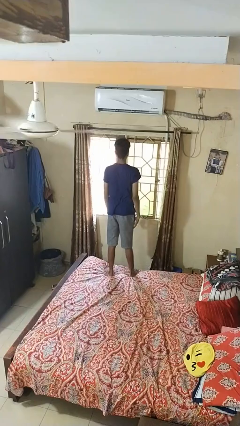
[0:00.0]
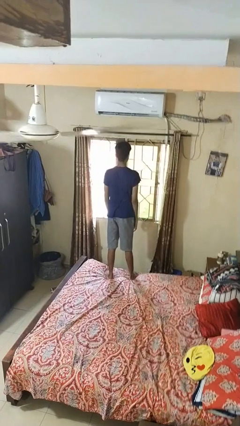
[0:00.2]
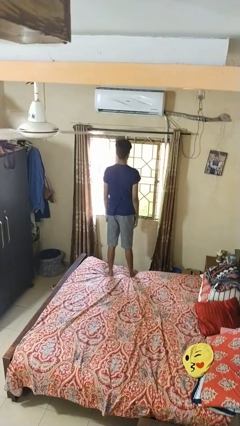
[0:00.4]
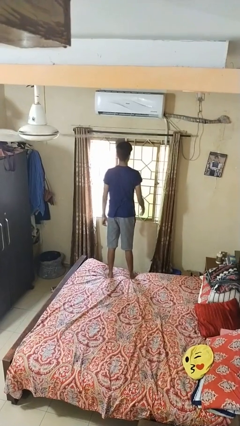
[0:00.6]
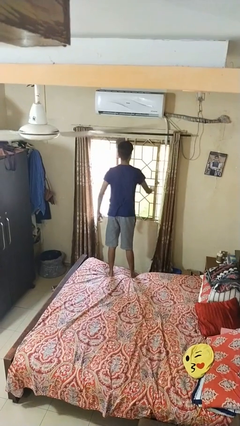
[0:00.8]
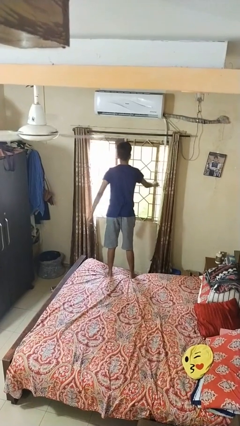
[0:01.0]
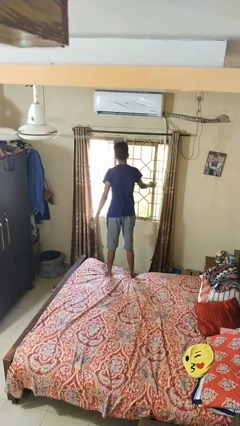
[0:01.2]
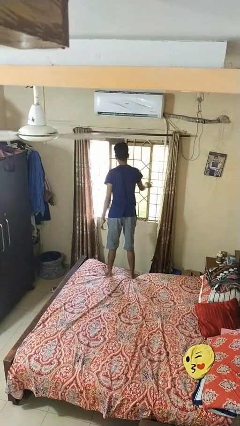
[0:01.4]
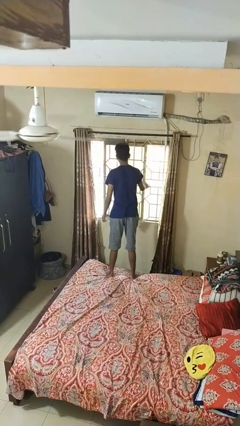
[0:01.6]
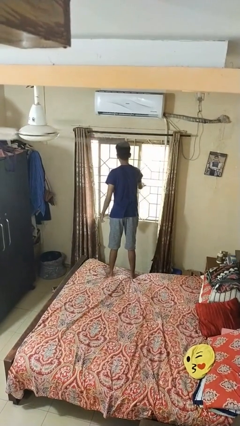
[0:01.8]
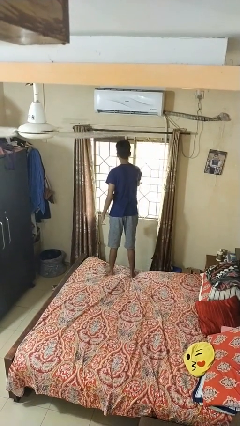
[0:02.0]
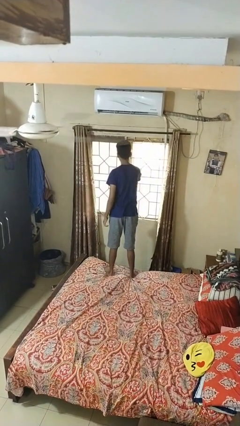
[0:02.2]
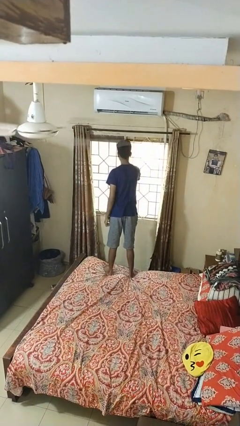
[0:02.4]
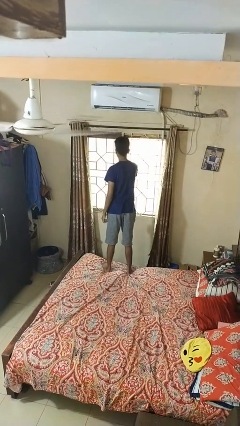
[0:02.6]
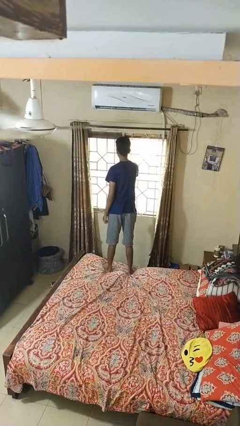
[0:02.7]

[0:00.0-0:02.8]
person closes home window

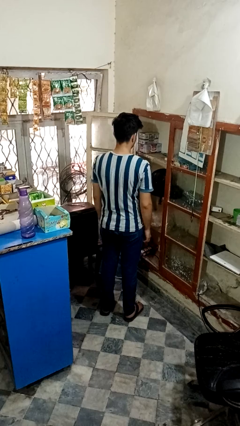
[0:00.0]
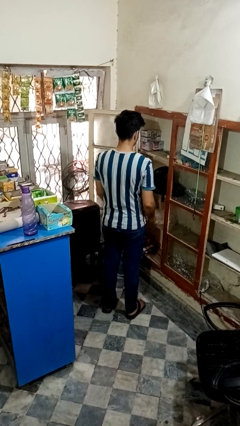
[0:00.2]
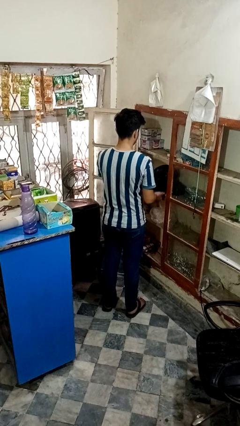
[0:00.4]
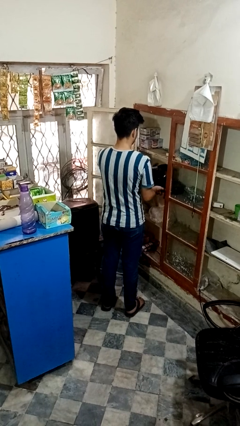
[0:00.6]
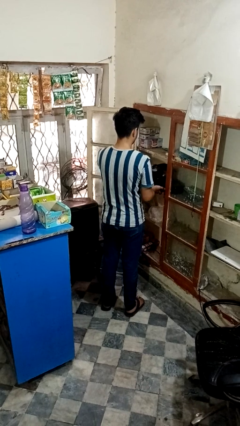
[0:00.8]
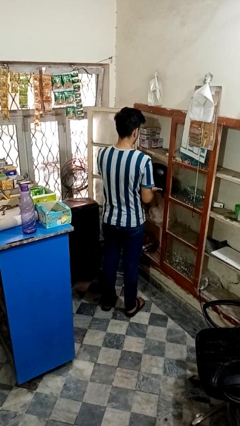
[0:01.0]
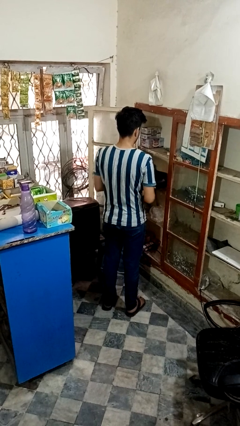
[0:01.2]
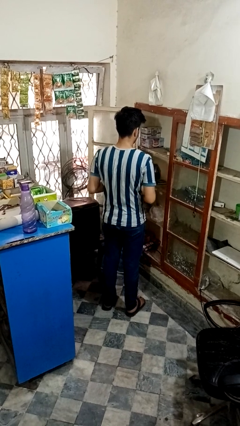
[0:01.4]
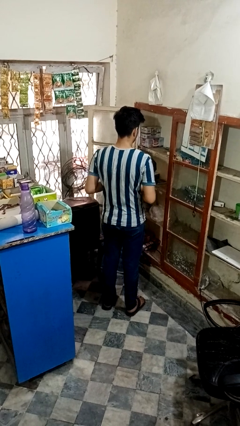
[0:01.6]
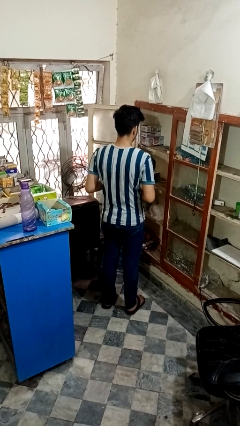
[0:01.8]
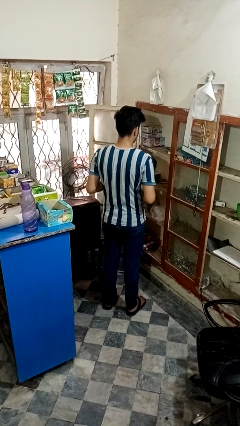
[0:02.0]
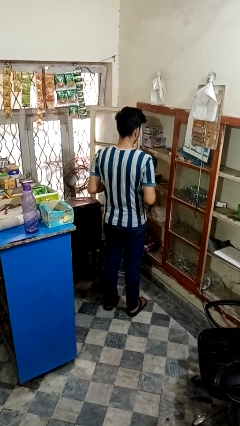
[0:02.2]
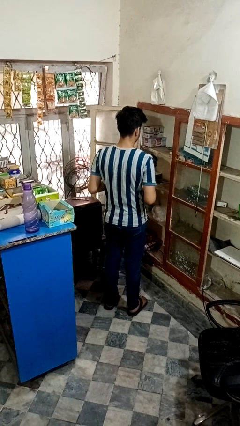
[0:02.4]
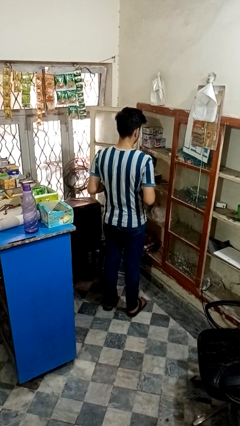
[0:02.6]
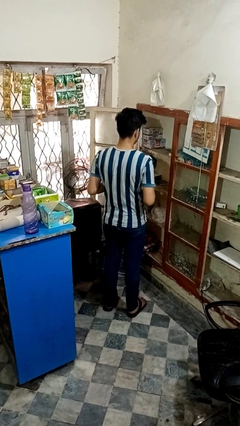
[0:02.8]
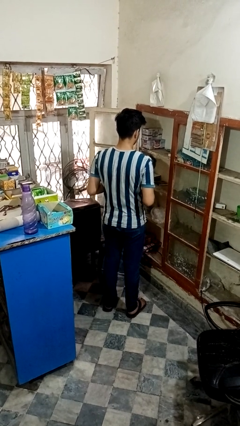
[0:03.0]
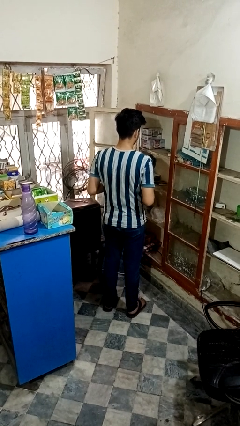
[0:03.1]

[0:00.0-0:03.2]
person picks up object from shelf

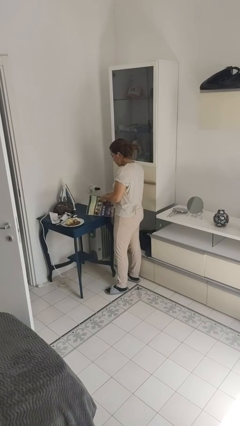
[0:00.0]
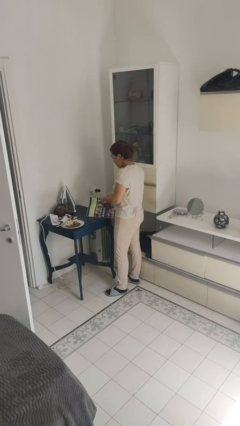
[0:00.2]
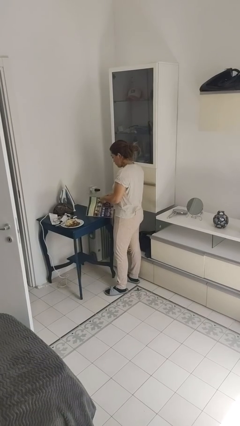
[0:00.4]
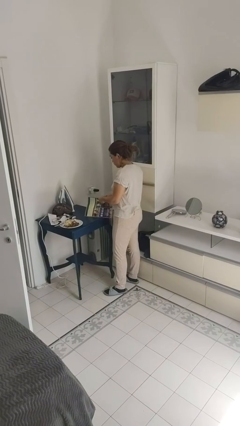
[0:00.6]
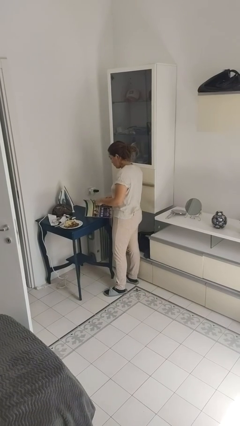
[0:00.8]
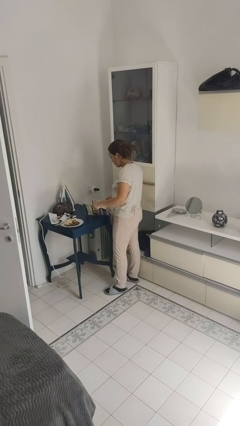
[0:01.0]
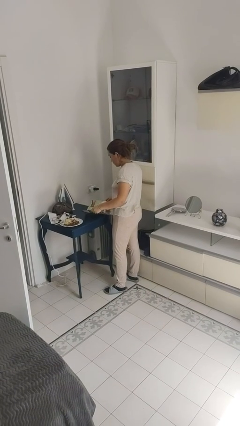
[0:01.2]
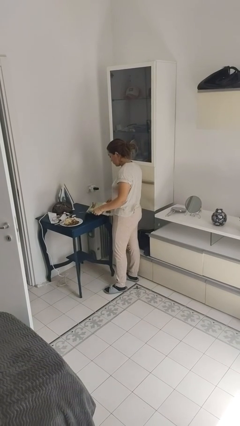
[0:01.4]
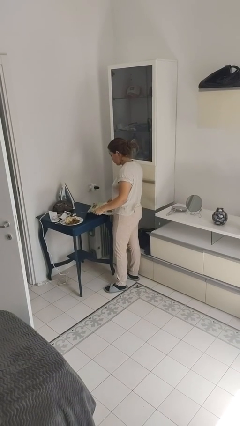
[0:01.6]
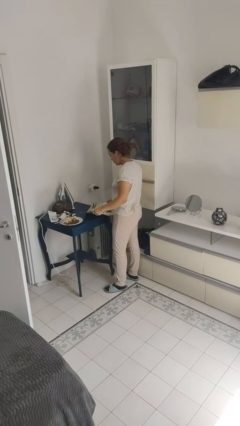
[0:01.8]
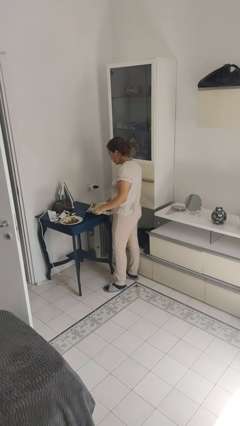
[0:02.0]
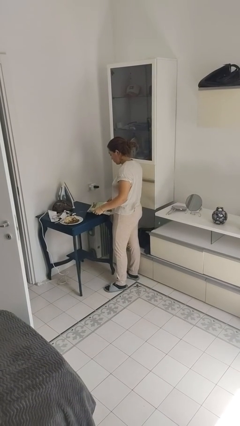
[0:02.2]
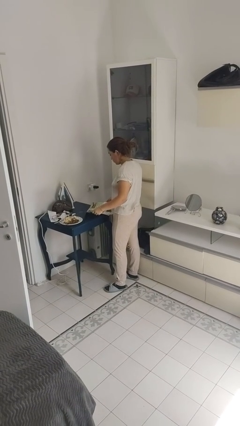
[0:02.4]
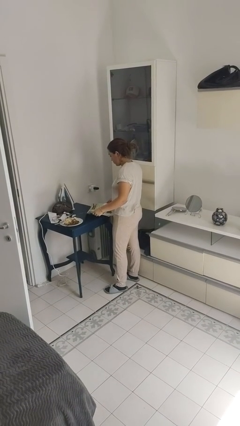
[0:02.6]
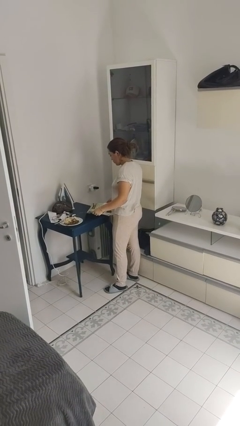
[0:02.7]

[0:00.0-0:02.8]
person reads magazine

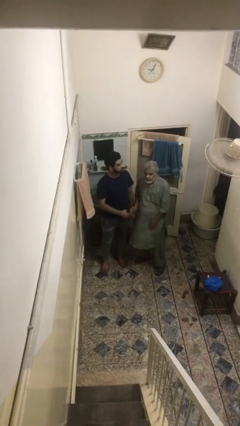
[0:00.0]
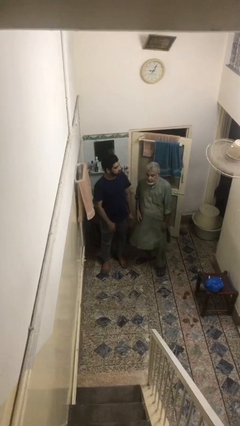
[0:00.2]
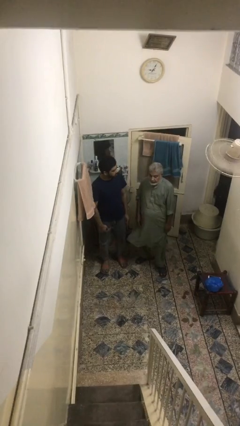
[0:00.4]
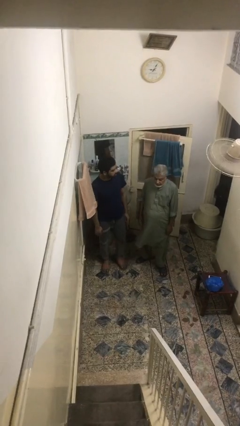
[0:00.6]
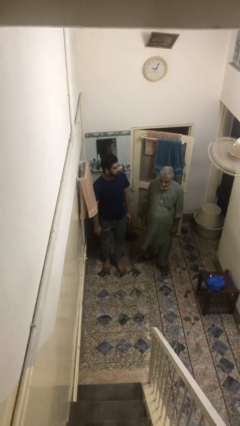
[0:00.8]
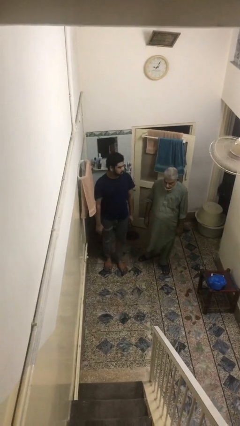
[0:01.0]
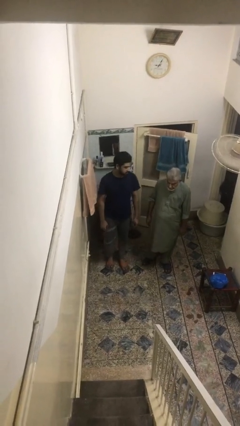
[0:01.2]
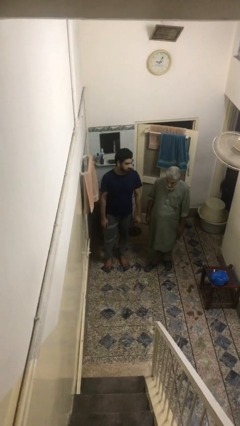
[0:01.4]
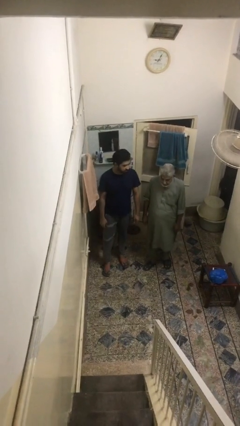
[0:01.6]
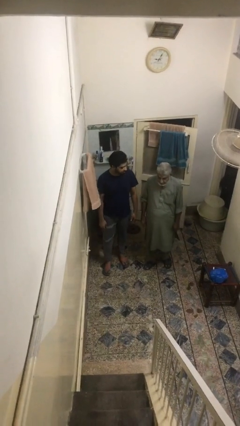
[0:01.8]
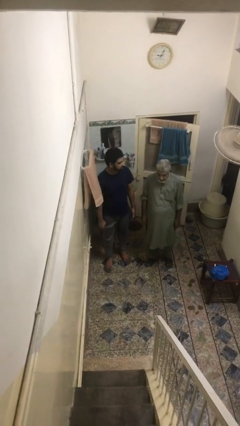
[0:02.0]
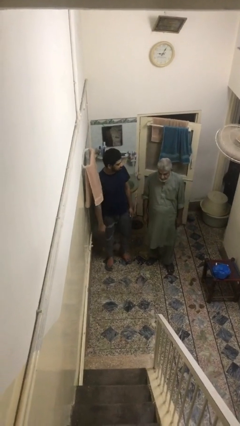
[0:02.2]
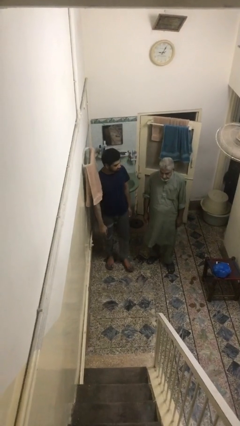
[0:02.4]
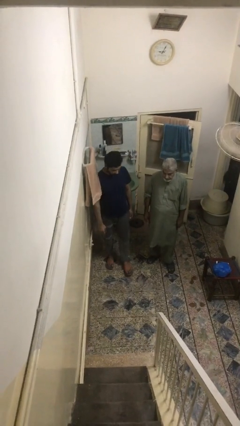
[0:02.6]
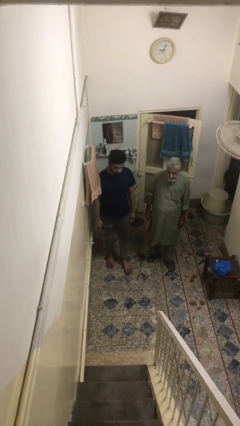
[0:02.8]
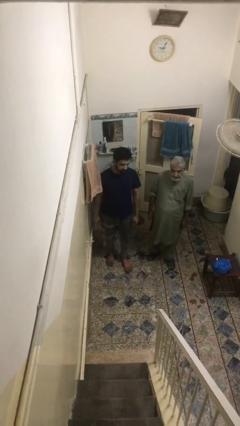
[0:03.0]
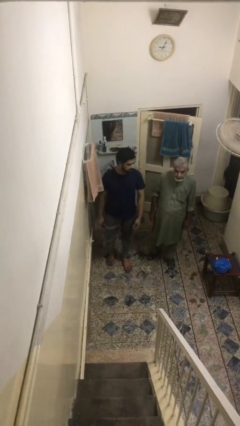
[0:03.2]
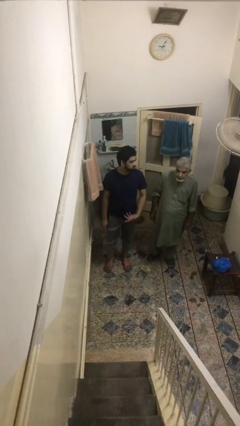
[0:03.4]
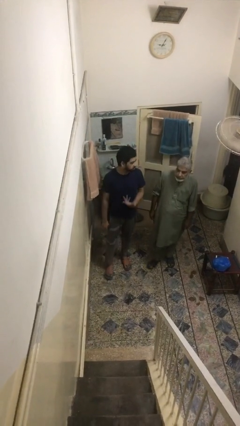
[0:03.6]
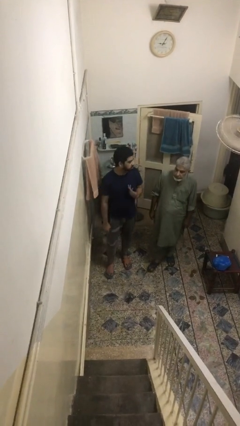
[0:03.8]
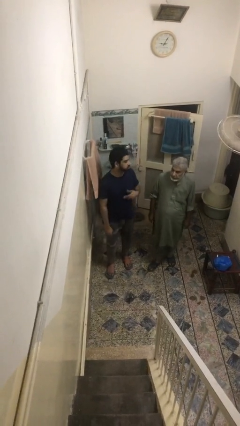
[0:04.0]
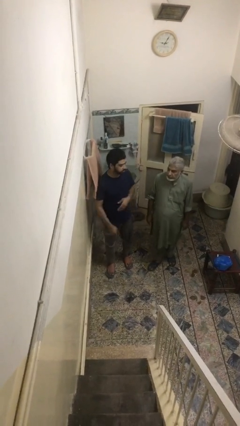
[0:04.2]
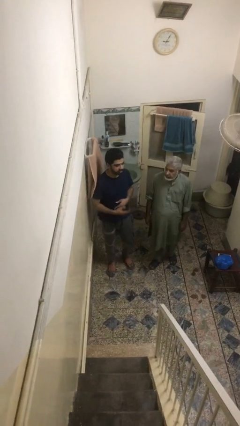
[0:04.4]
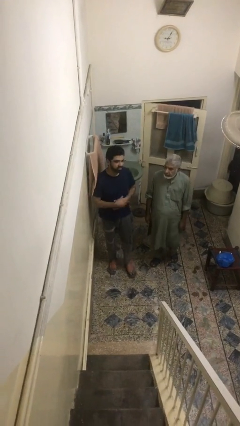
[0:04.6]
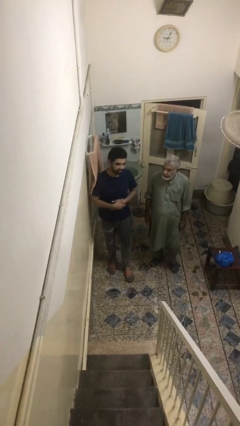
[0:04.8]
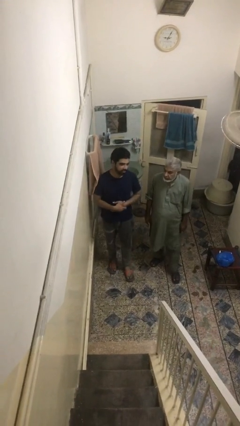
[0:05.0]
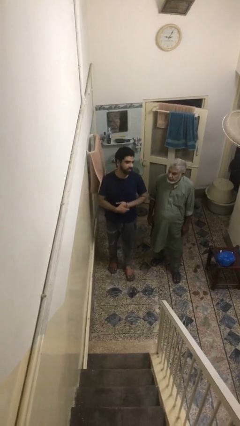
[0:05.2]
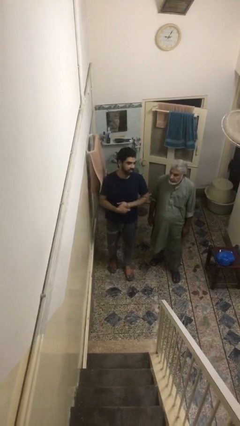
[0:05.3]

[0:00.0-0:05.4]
person talks to person

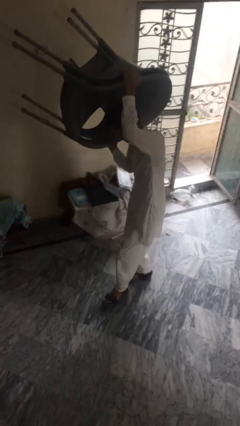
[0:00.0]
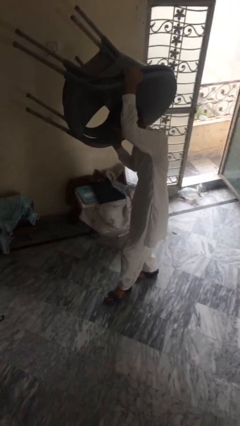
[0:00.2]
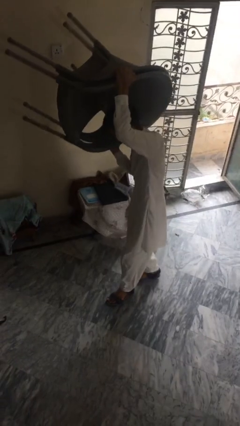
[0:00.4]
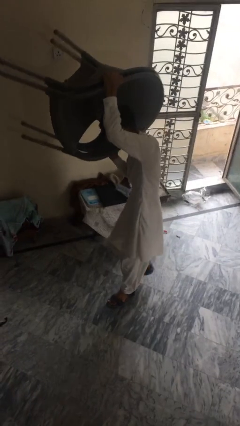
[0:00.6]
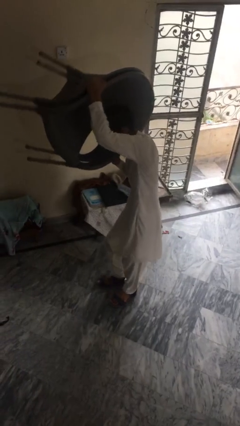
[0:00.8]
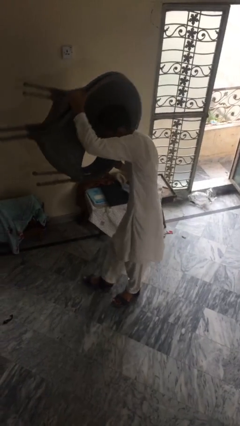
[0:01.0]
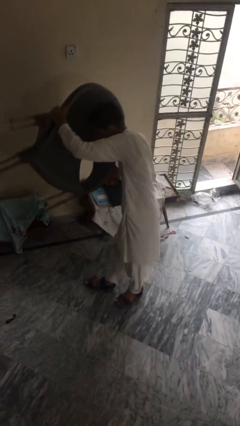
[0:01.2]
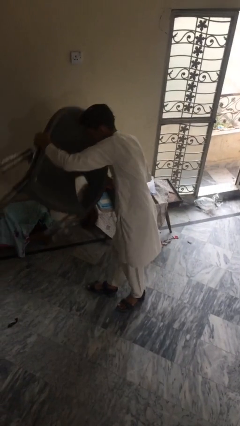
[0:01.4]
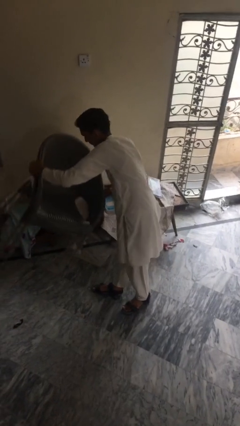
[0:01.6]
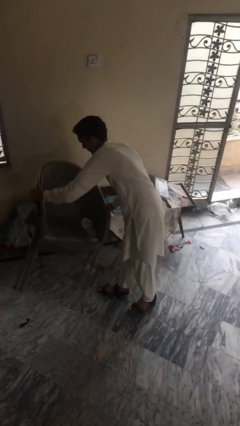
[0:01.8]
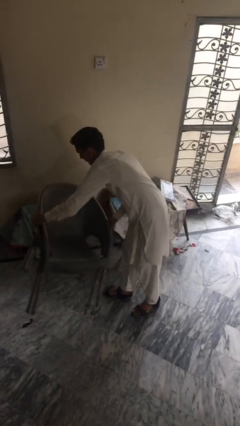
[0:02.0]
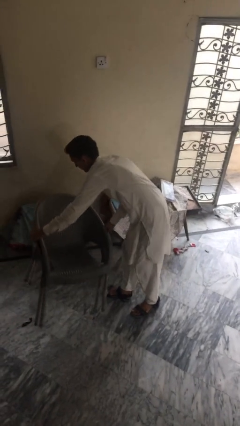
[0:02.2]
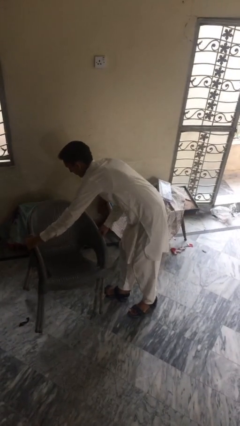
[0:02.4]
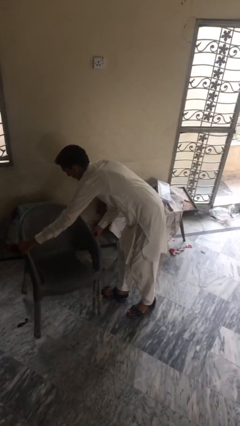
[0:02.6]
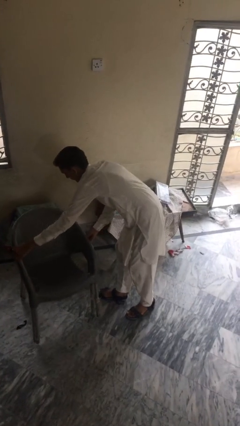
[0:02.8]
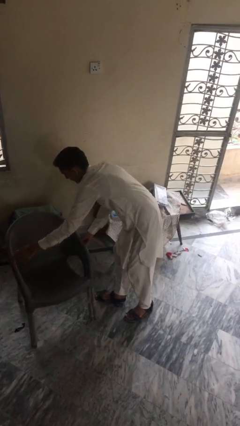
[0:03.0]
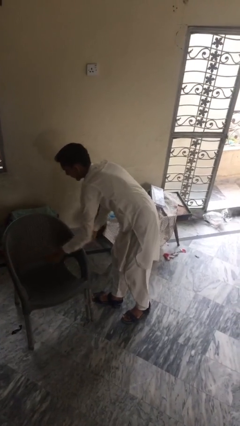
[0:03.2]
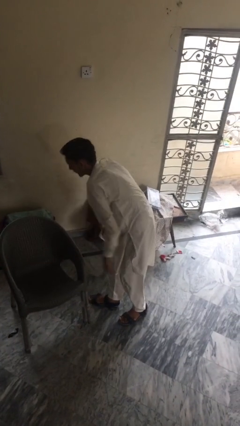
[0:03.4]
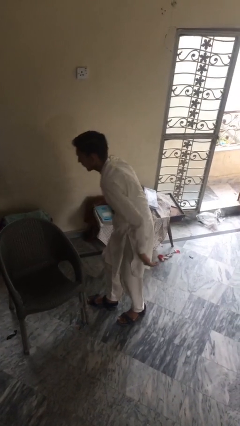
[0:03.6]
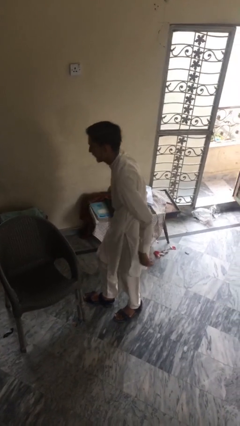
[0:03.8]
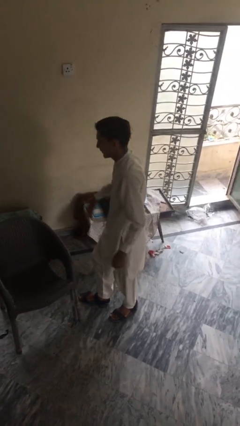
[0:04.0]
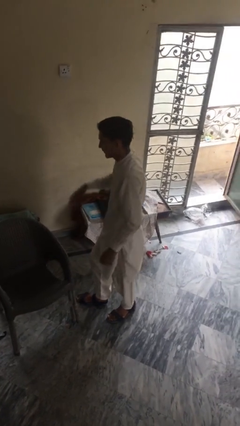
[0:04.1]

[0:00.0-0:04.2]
person puts down object on floor
